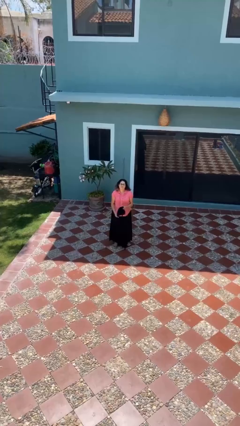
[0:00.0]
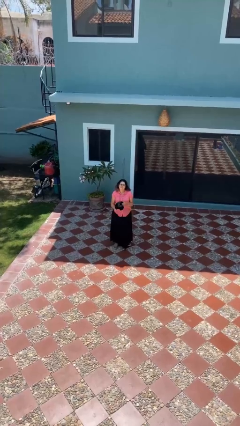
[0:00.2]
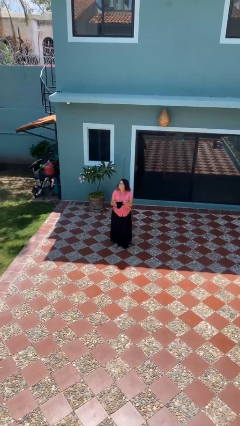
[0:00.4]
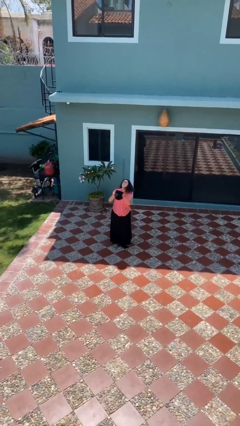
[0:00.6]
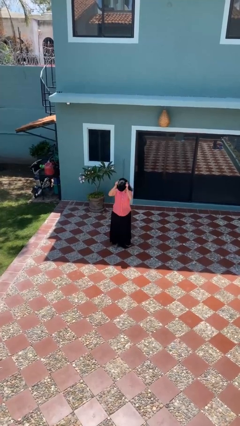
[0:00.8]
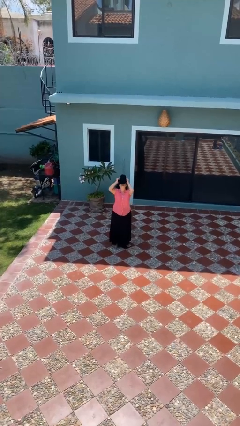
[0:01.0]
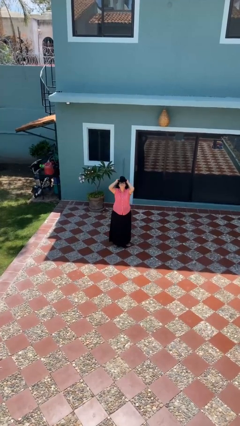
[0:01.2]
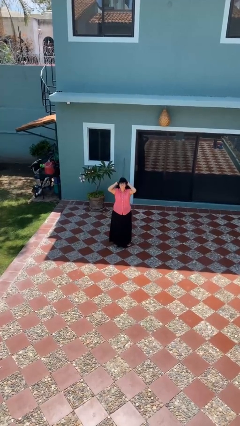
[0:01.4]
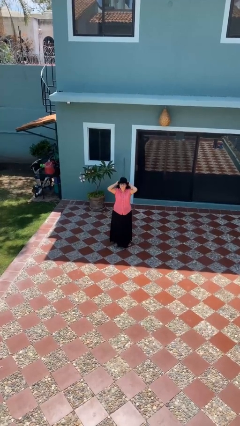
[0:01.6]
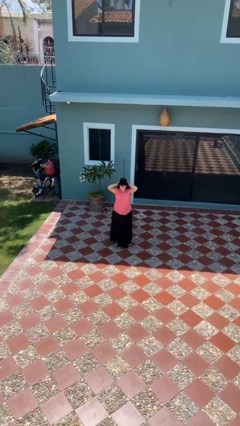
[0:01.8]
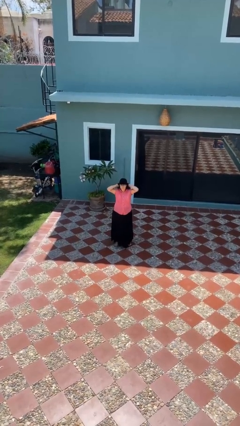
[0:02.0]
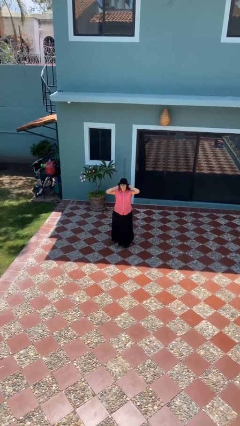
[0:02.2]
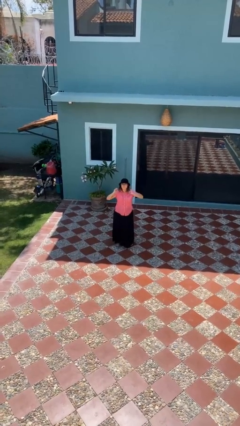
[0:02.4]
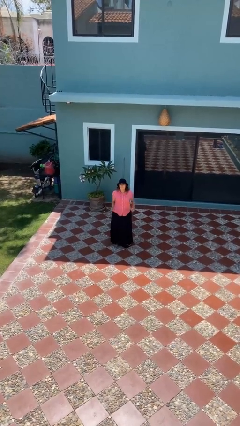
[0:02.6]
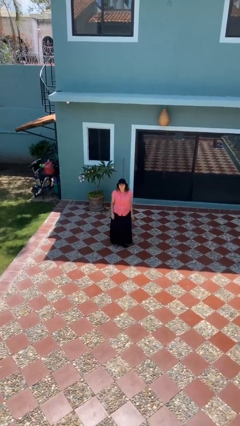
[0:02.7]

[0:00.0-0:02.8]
person puts on hat

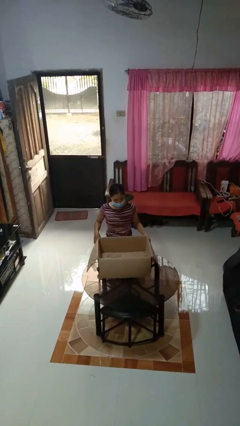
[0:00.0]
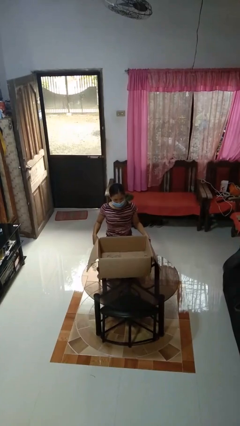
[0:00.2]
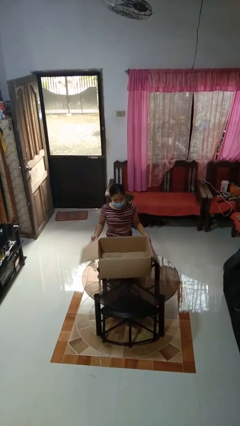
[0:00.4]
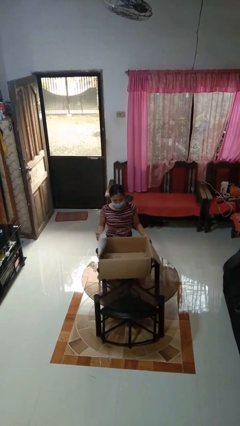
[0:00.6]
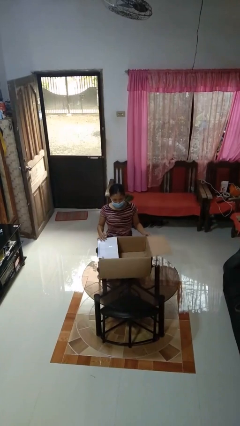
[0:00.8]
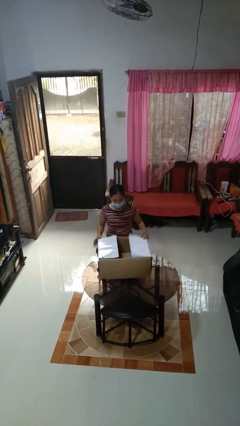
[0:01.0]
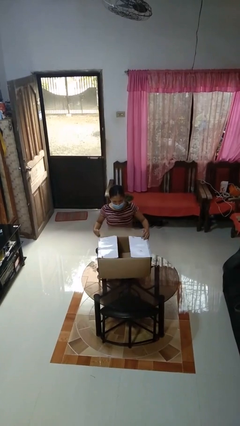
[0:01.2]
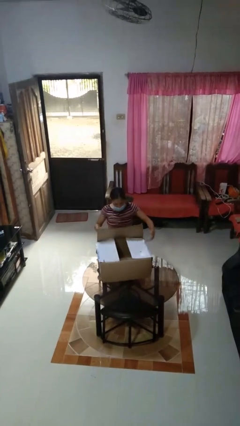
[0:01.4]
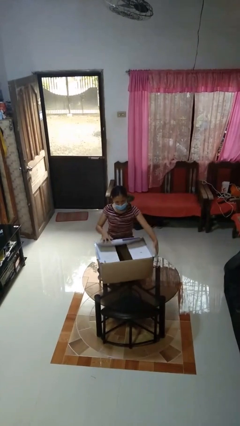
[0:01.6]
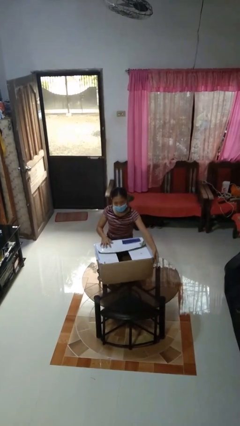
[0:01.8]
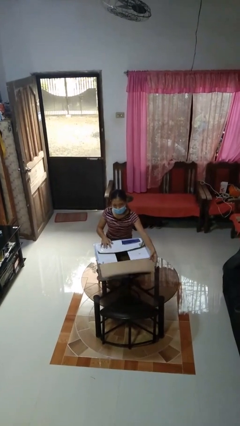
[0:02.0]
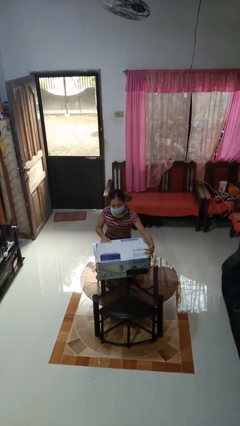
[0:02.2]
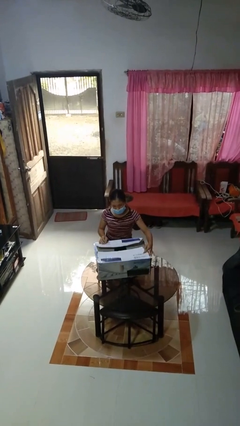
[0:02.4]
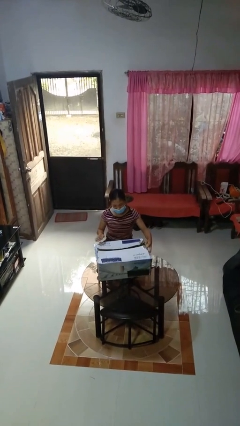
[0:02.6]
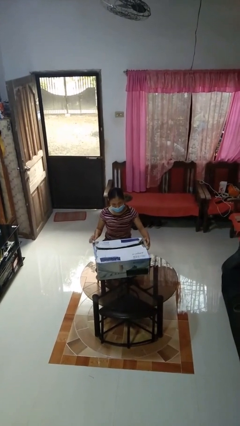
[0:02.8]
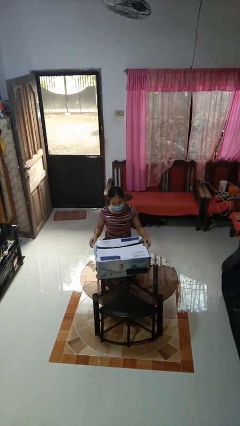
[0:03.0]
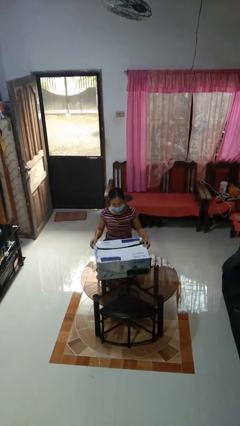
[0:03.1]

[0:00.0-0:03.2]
person closes box

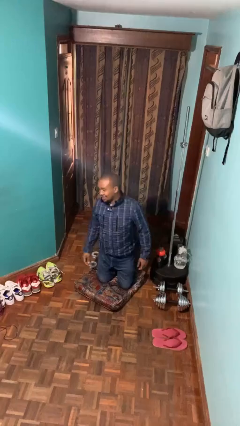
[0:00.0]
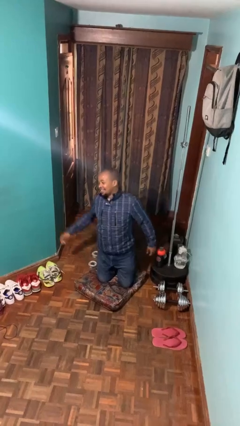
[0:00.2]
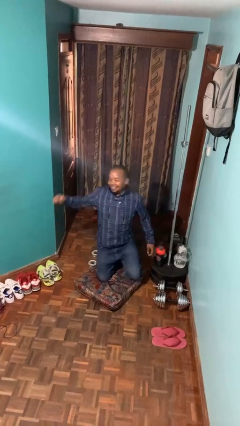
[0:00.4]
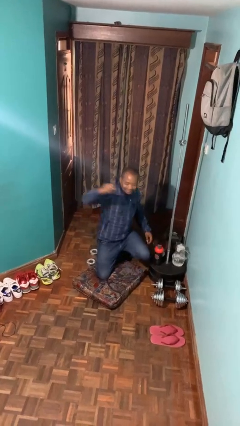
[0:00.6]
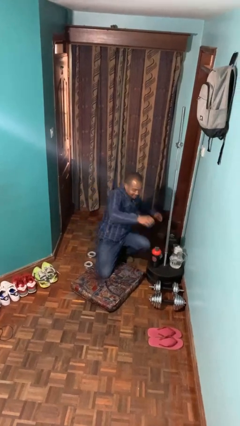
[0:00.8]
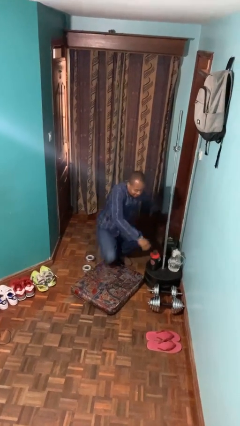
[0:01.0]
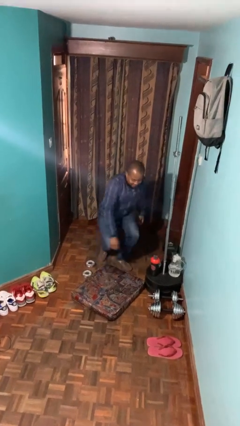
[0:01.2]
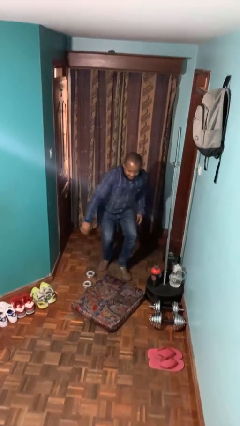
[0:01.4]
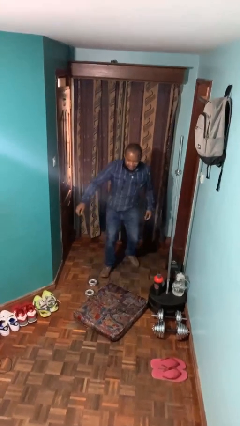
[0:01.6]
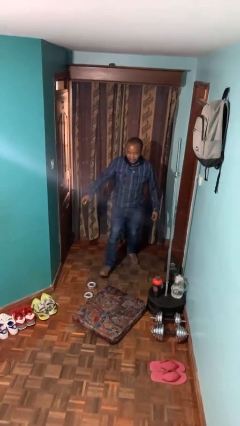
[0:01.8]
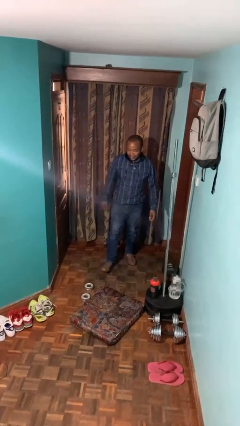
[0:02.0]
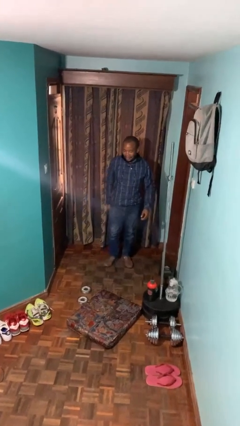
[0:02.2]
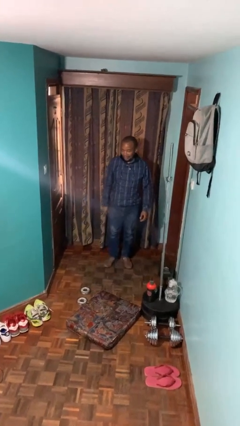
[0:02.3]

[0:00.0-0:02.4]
person stands up from floor

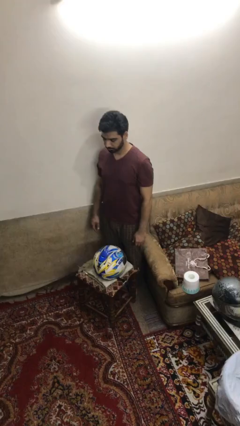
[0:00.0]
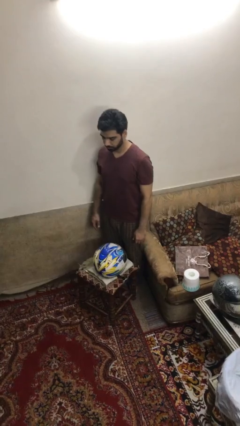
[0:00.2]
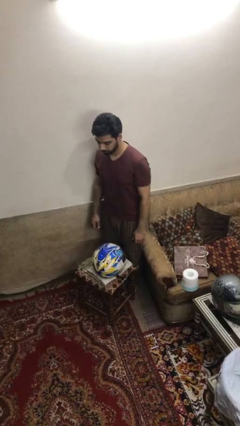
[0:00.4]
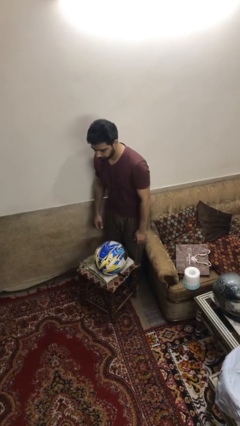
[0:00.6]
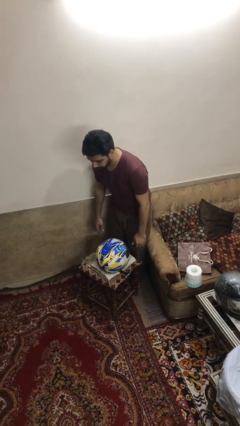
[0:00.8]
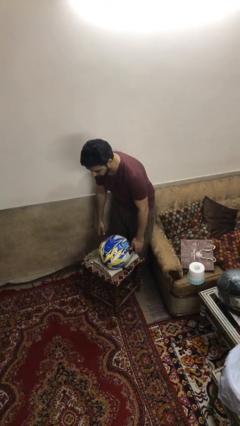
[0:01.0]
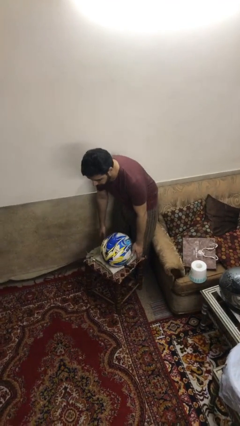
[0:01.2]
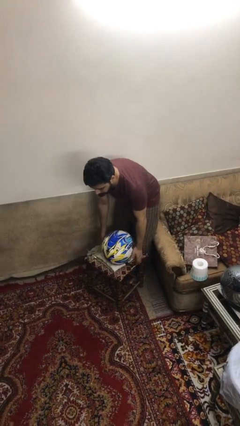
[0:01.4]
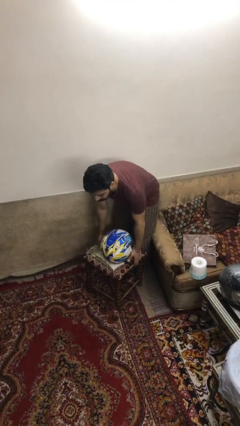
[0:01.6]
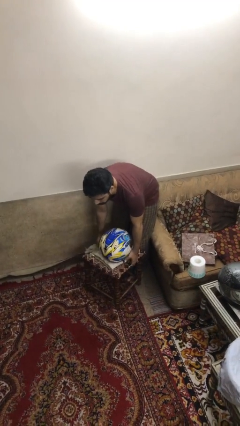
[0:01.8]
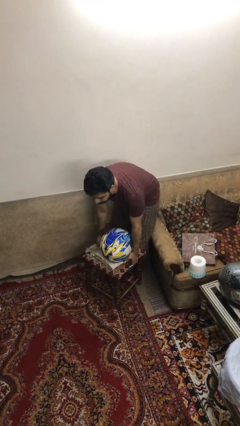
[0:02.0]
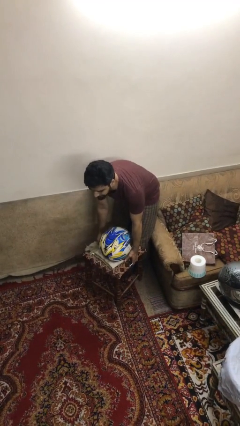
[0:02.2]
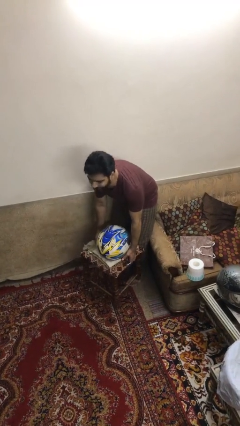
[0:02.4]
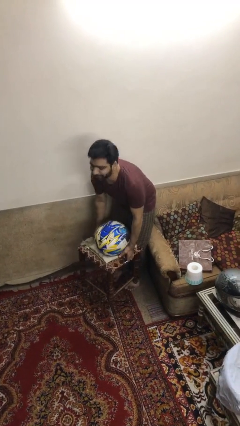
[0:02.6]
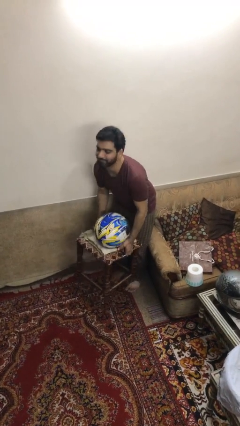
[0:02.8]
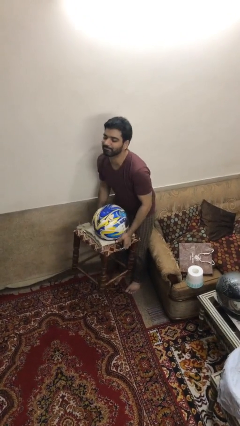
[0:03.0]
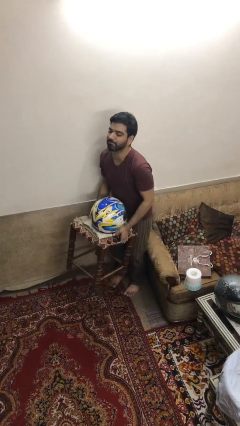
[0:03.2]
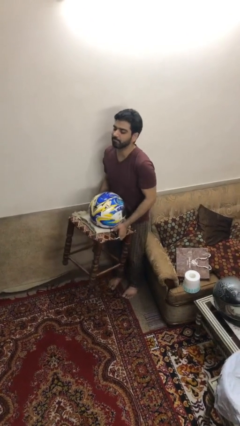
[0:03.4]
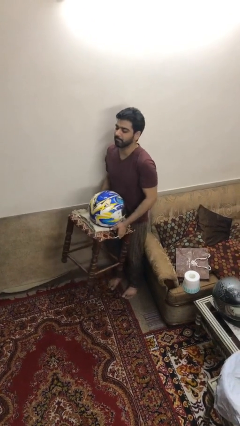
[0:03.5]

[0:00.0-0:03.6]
person picks up object from floor

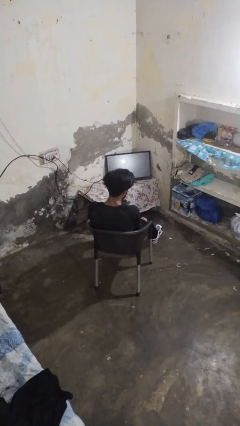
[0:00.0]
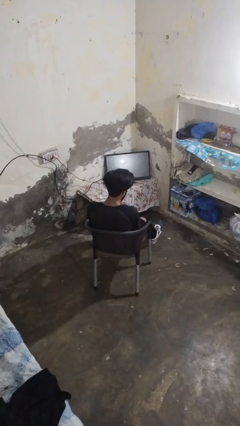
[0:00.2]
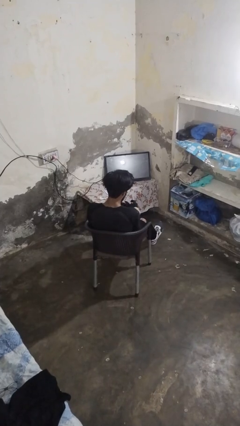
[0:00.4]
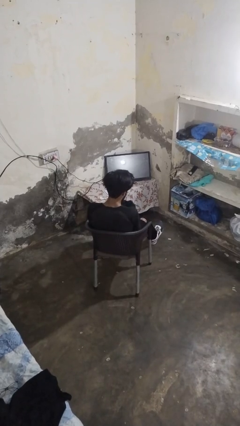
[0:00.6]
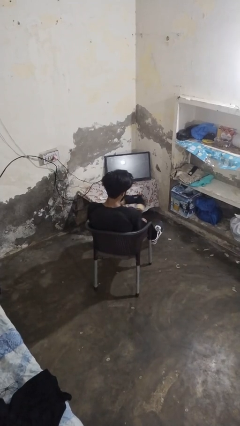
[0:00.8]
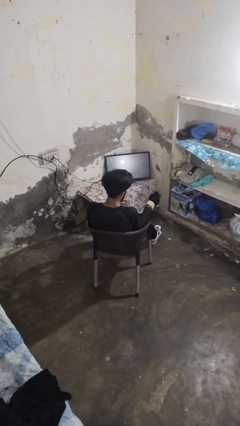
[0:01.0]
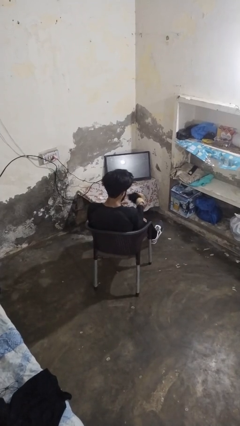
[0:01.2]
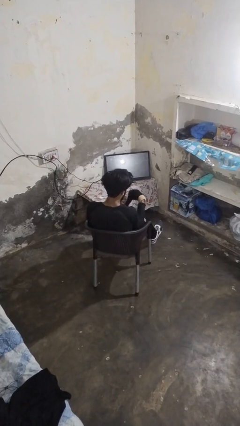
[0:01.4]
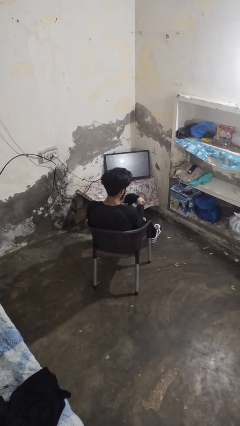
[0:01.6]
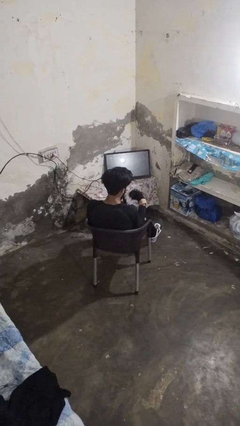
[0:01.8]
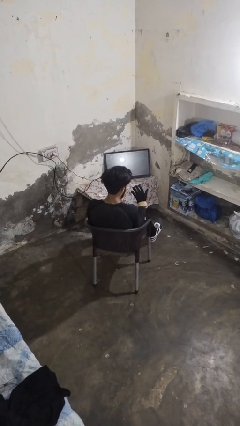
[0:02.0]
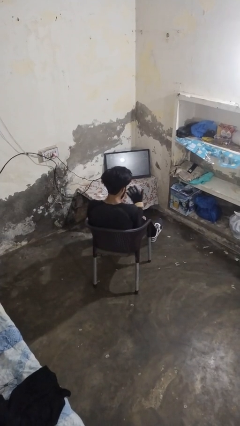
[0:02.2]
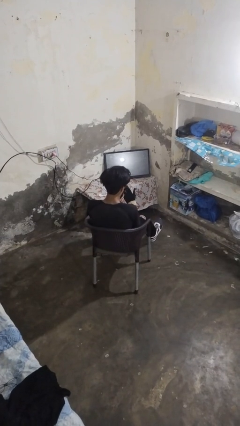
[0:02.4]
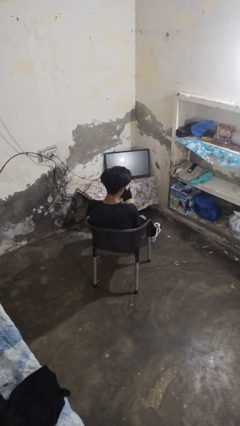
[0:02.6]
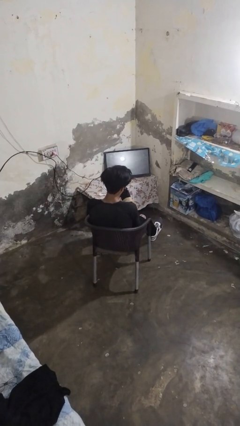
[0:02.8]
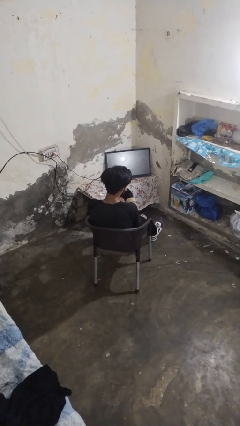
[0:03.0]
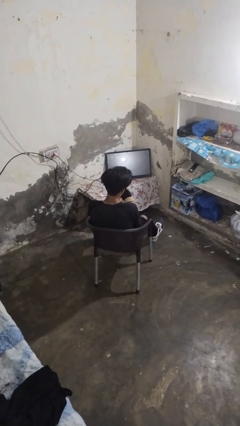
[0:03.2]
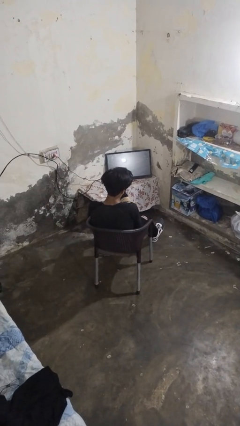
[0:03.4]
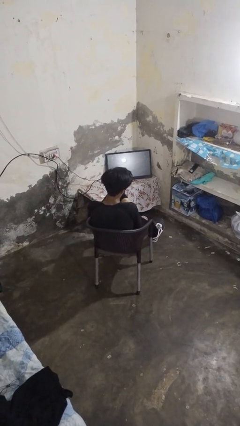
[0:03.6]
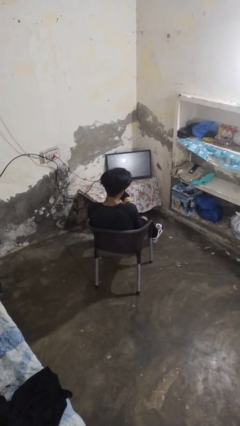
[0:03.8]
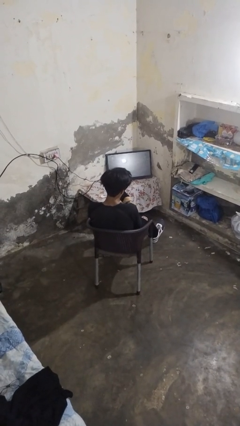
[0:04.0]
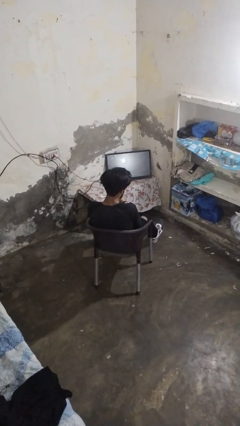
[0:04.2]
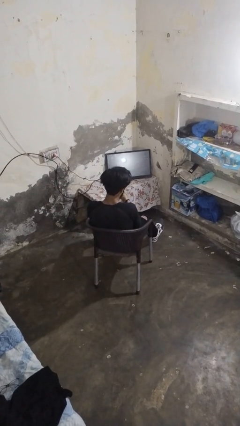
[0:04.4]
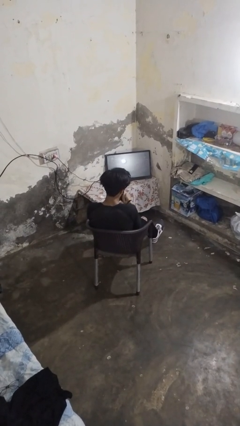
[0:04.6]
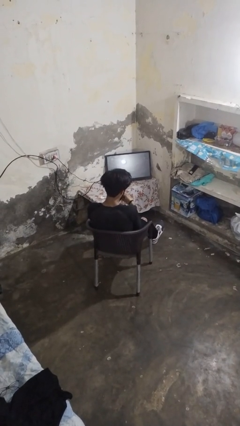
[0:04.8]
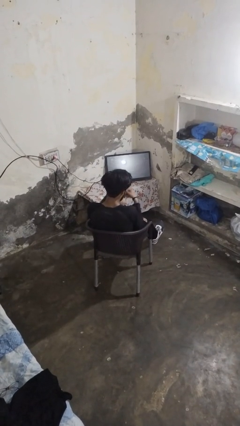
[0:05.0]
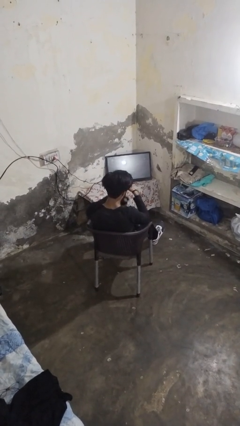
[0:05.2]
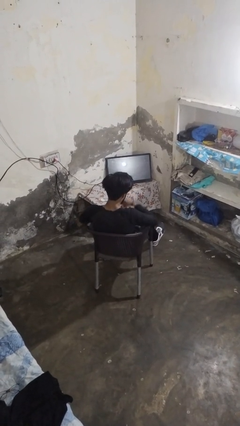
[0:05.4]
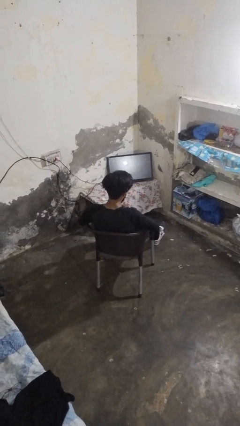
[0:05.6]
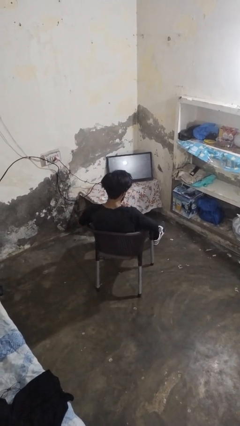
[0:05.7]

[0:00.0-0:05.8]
person takes off gloves
